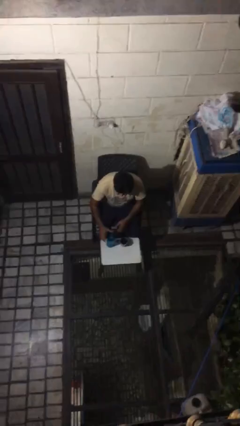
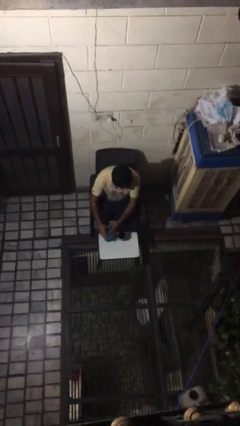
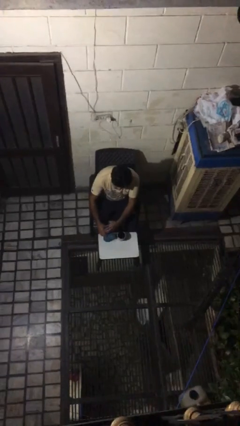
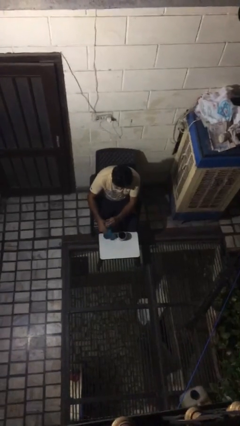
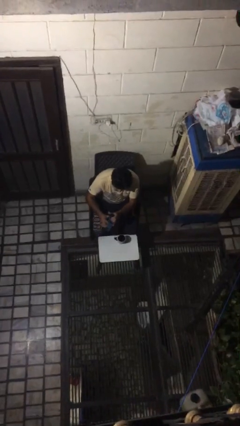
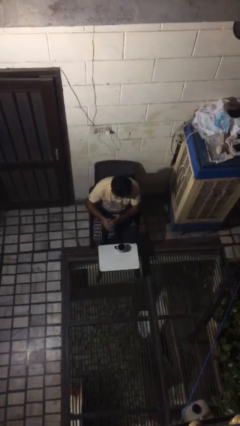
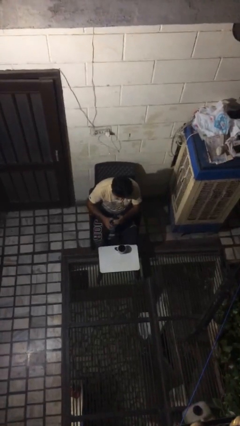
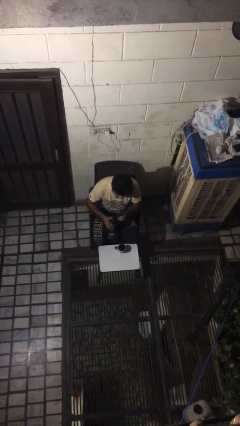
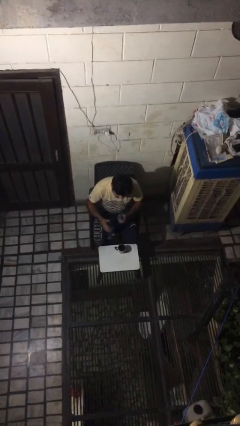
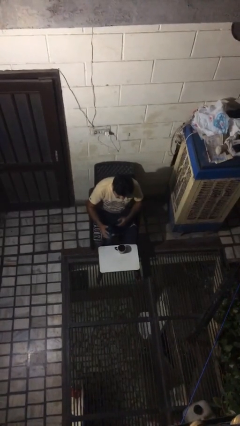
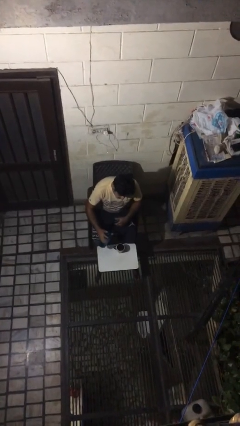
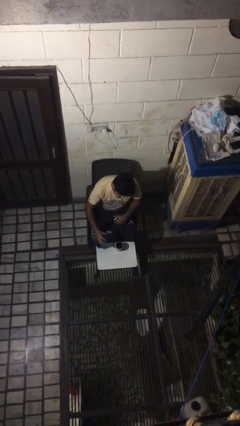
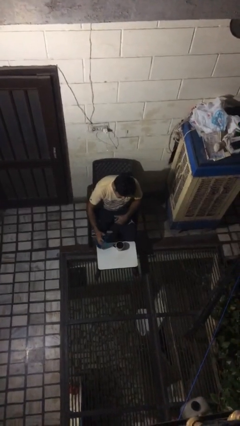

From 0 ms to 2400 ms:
person unscrews lid from bottle

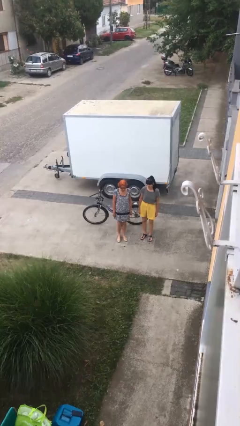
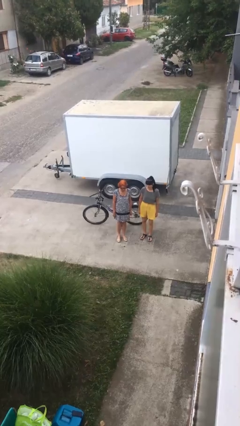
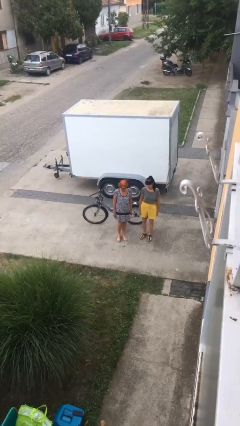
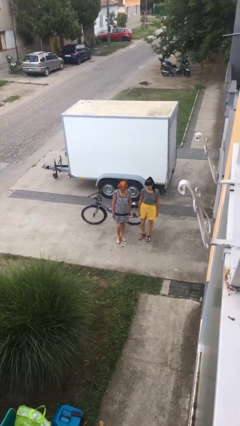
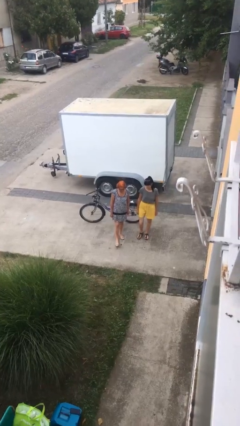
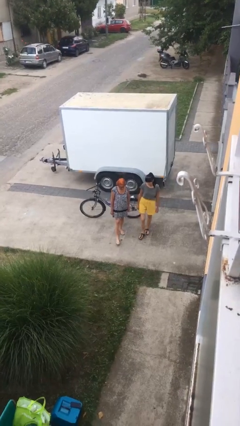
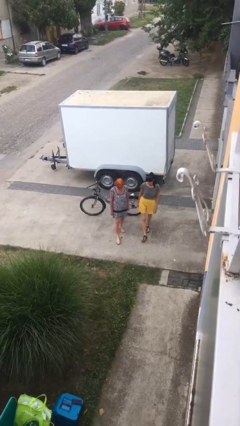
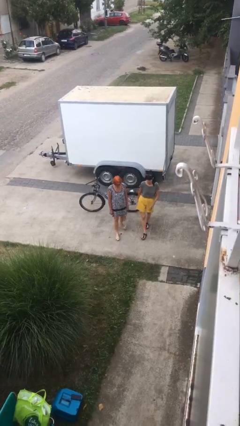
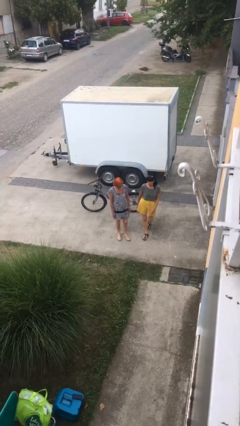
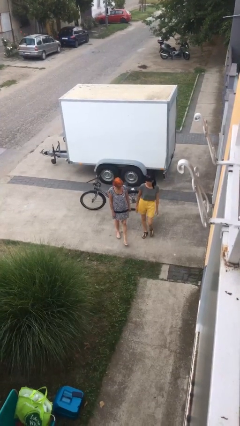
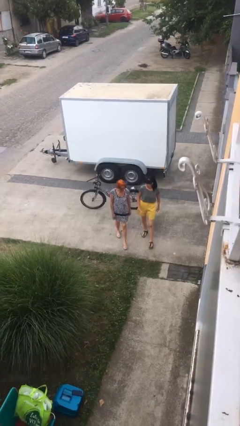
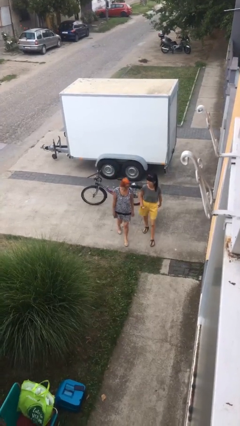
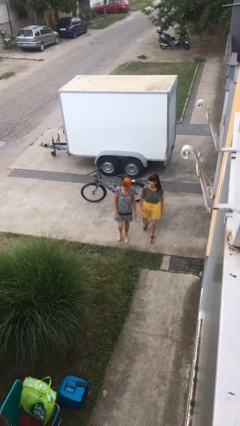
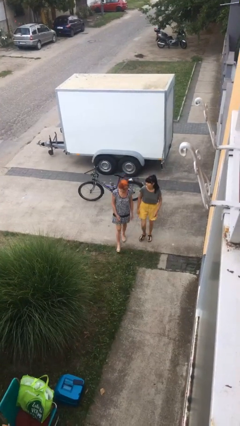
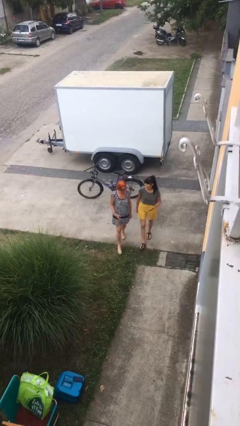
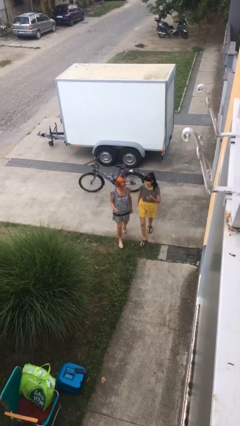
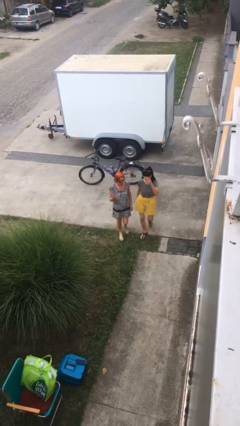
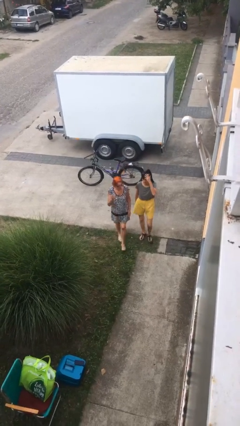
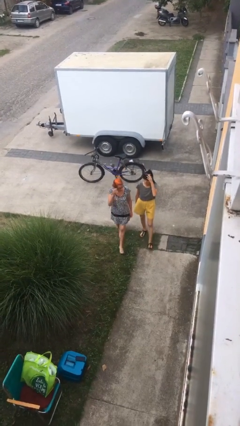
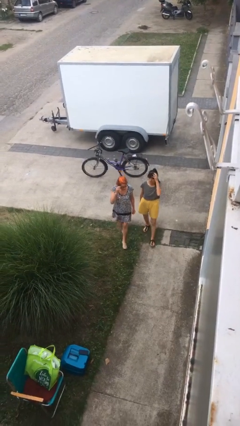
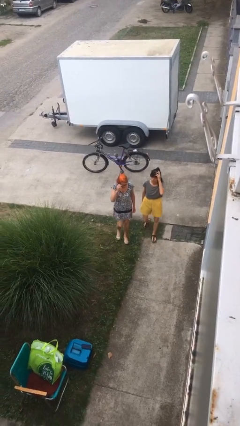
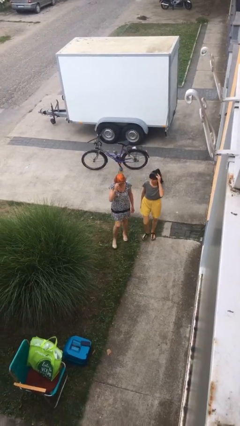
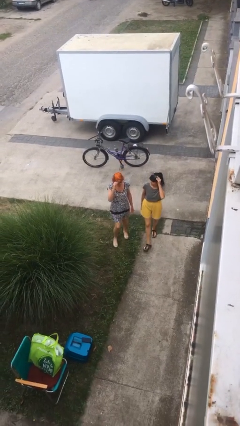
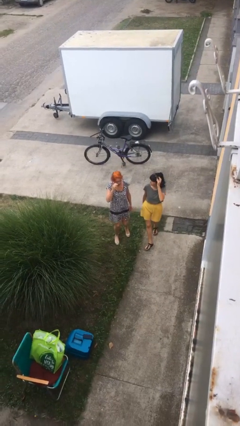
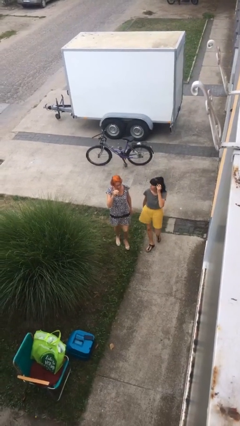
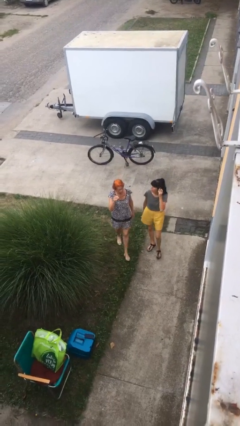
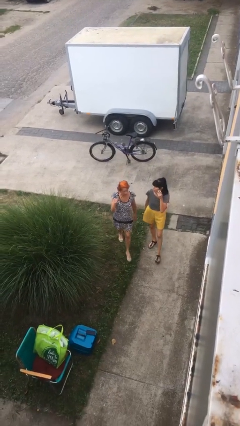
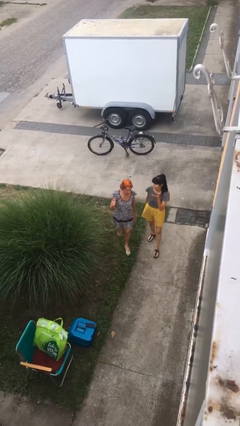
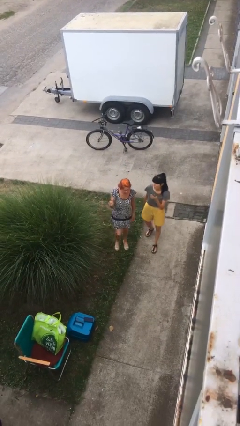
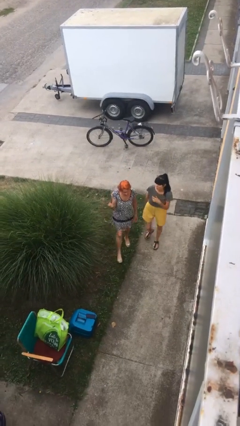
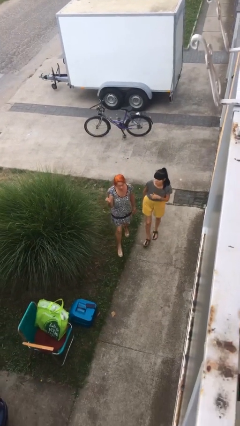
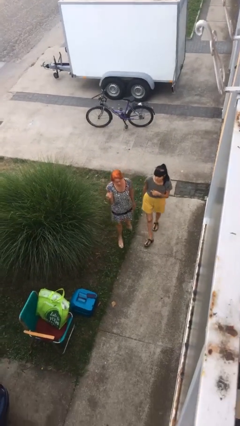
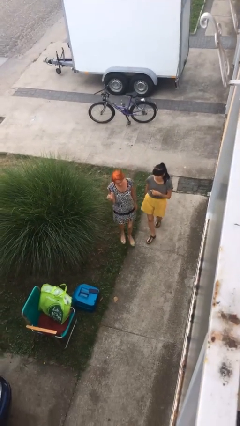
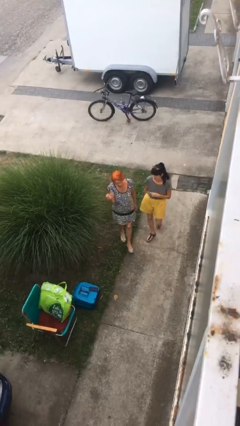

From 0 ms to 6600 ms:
person talks to person

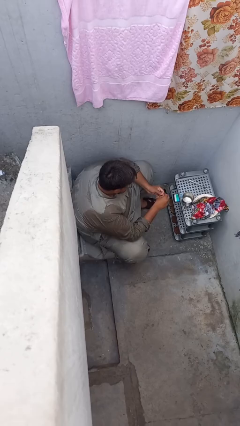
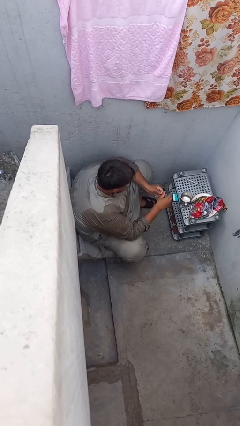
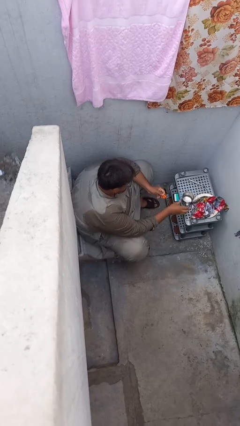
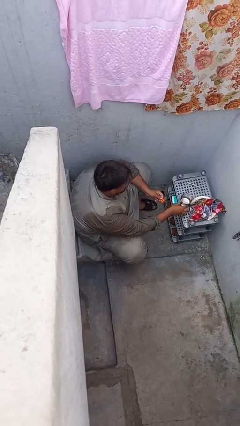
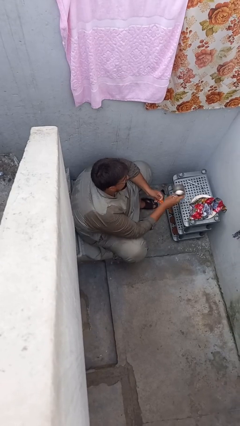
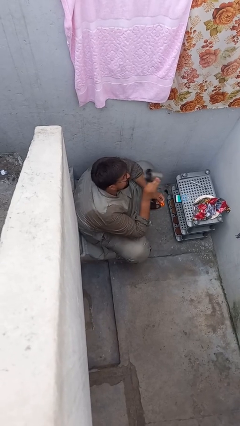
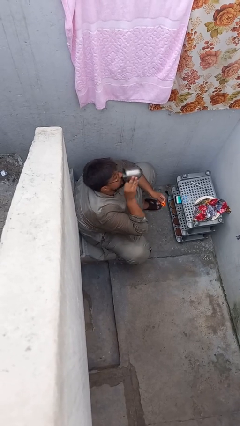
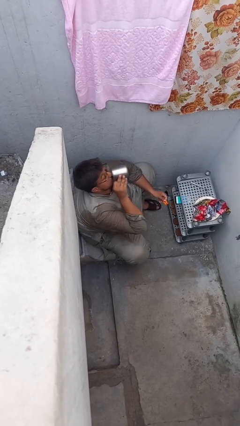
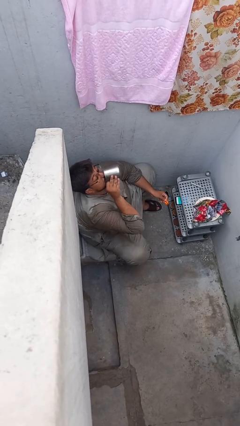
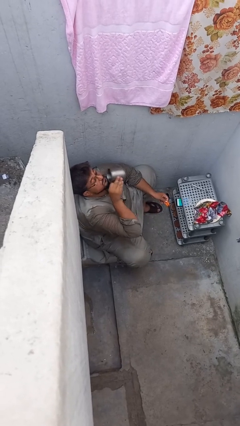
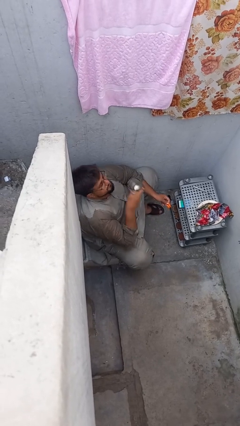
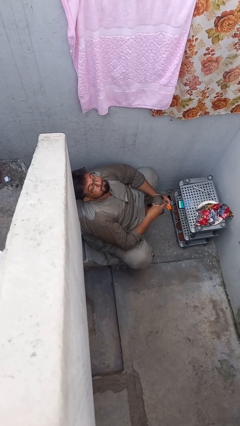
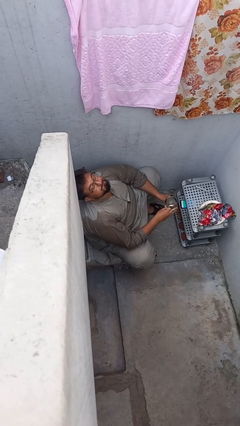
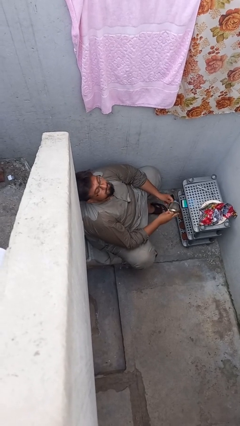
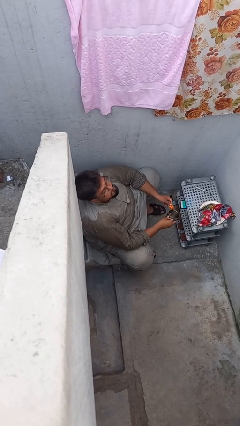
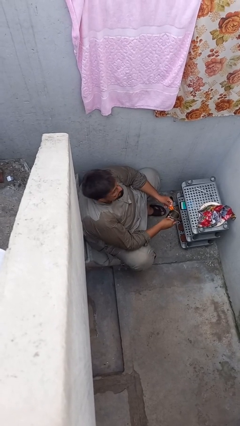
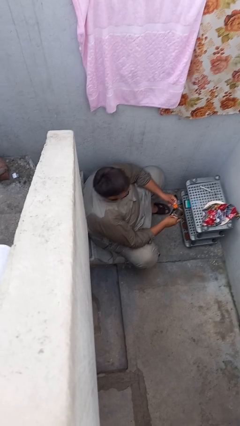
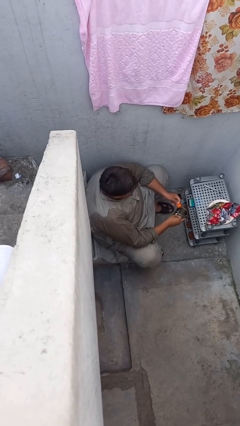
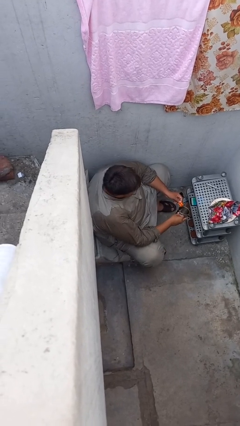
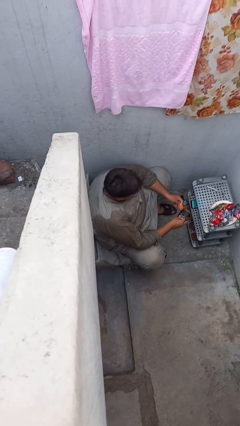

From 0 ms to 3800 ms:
person drinks from cup

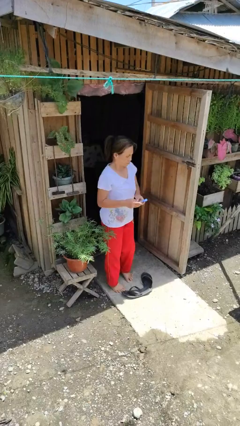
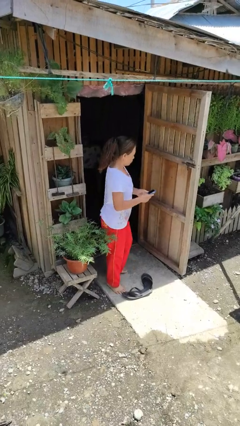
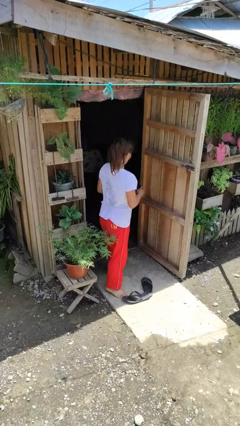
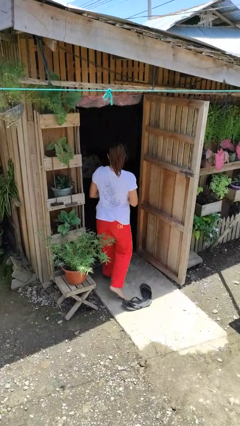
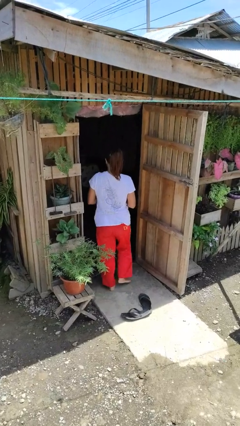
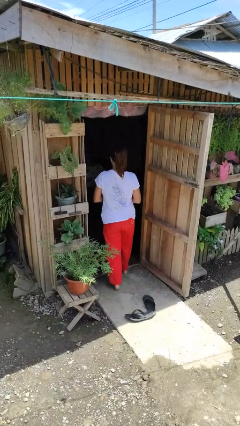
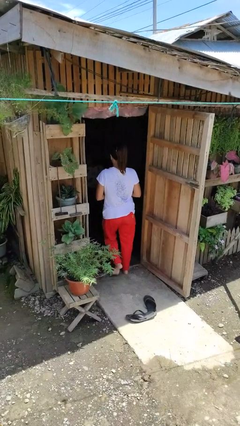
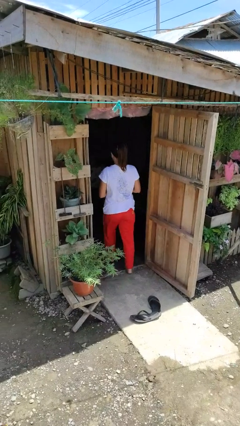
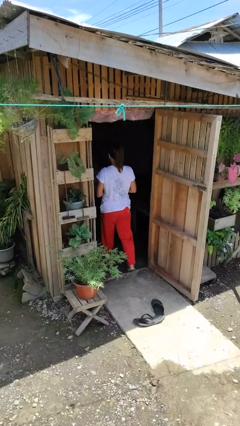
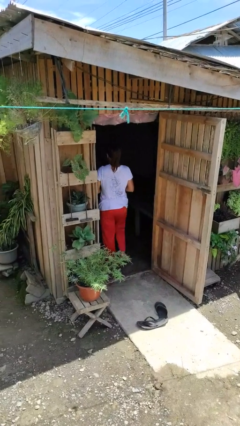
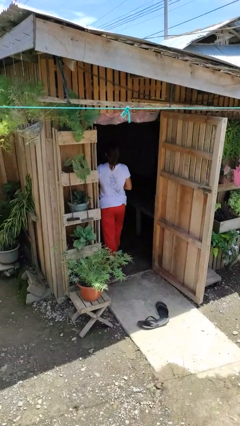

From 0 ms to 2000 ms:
person exits scene through structure

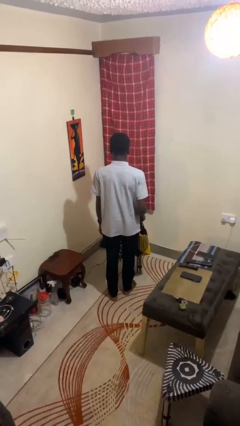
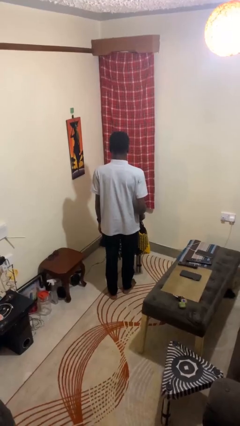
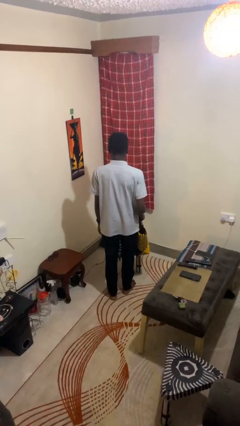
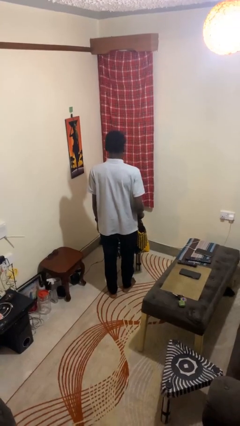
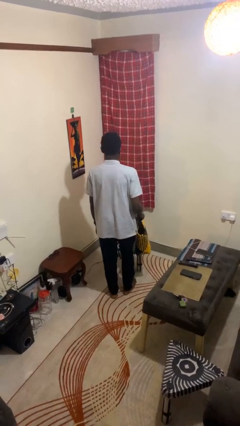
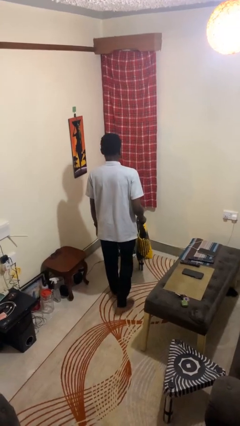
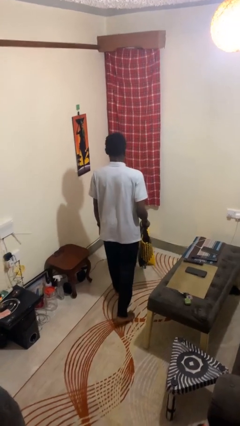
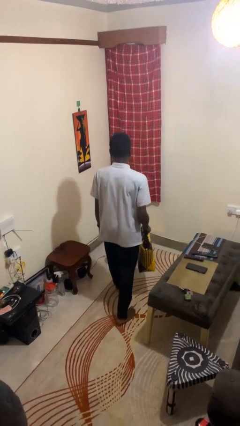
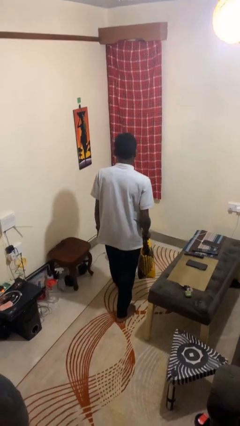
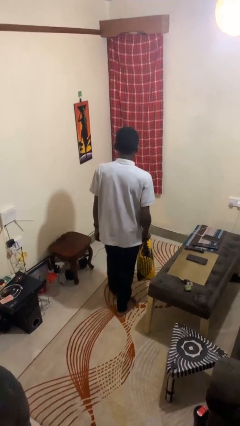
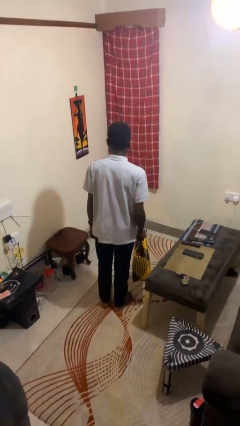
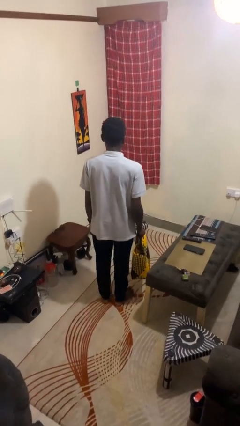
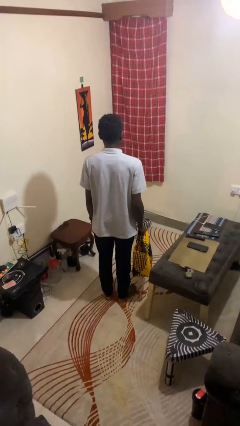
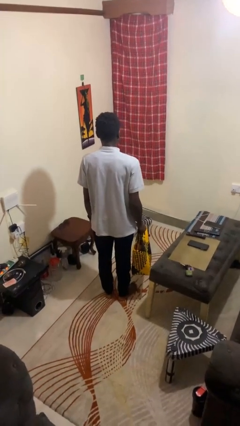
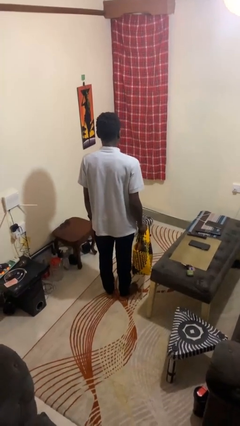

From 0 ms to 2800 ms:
person carries groceries
